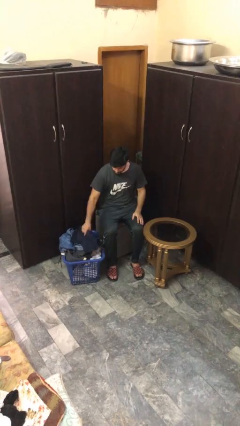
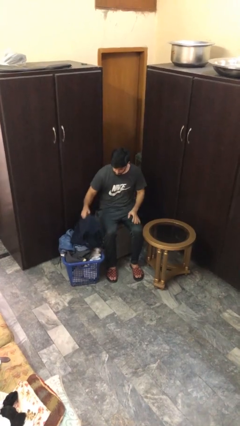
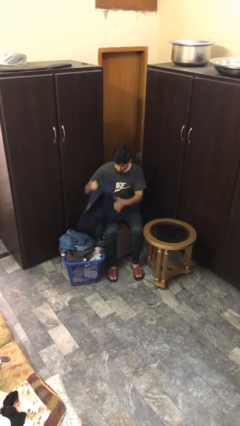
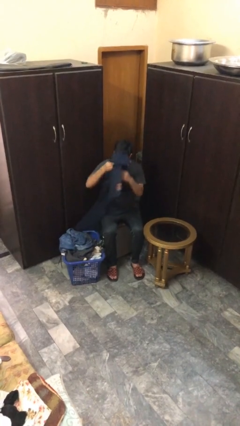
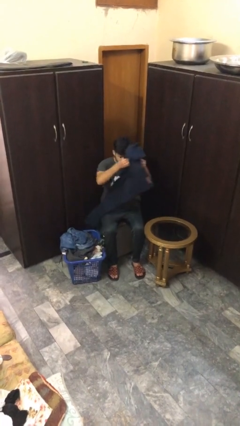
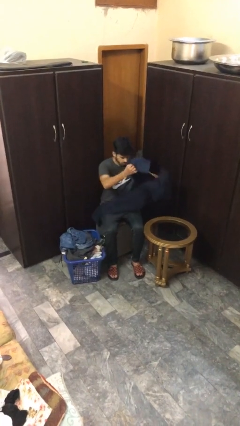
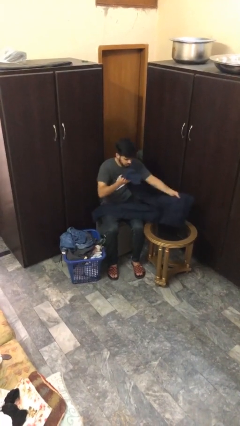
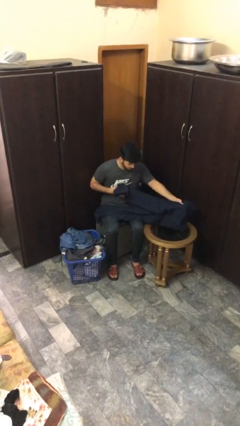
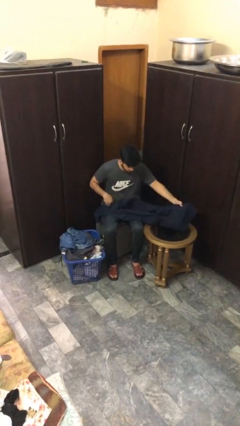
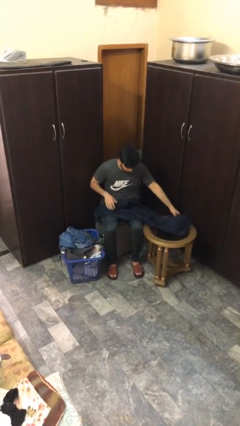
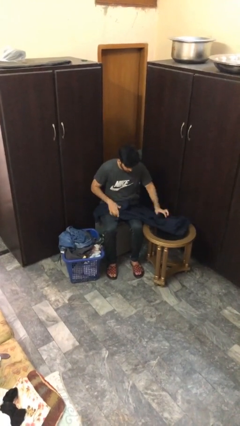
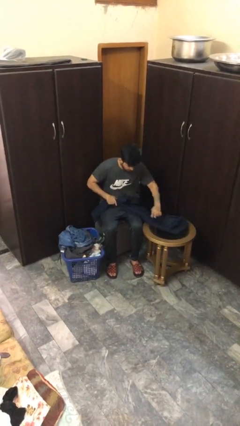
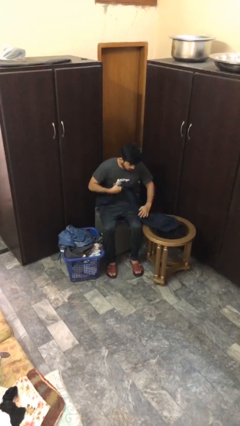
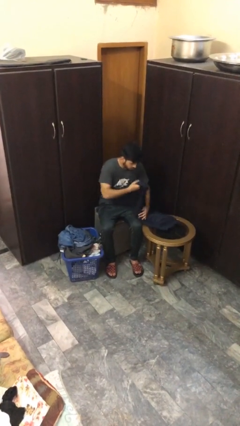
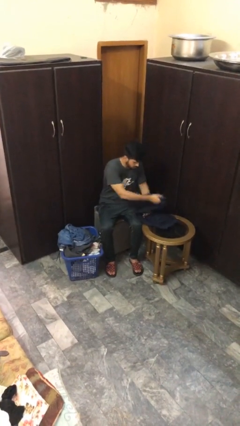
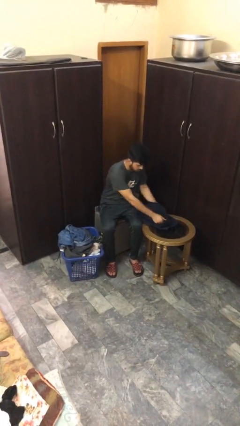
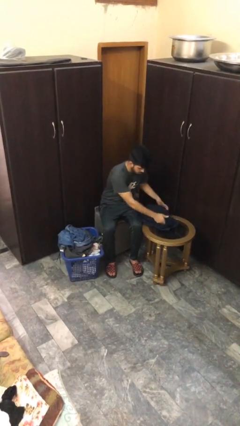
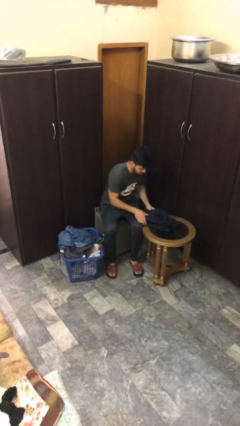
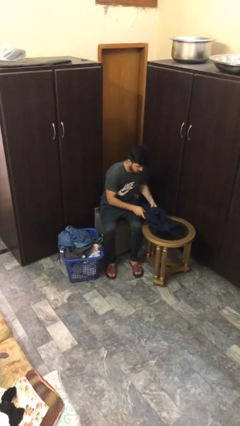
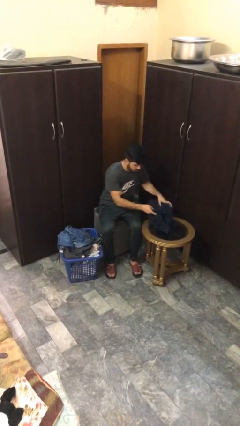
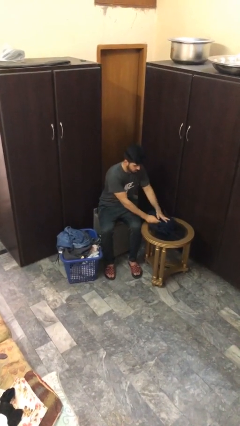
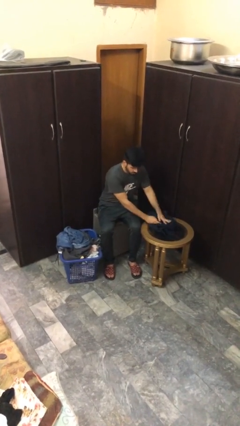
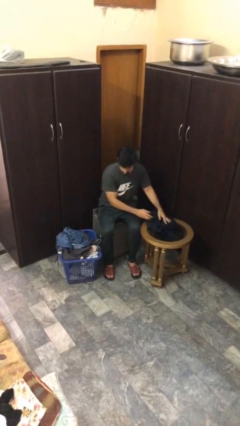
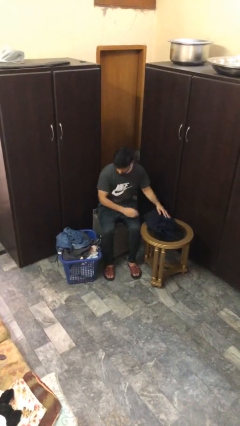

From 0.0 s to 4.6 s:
person folds pants

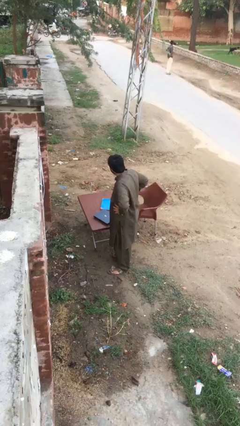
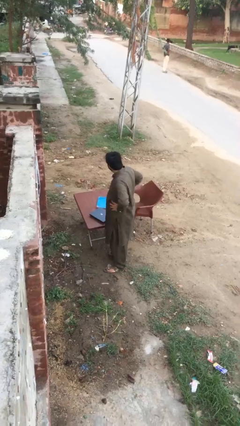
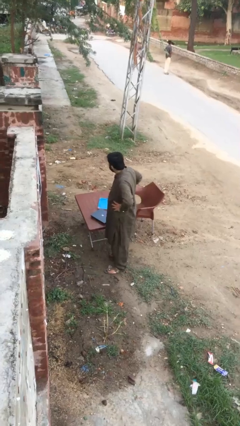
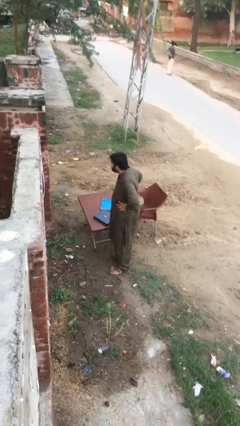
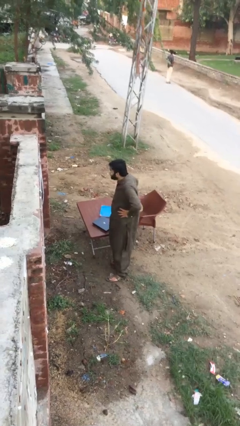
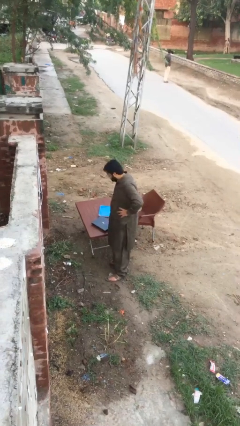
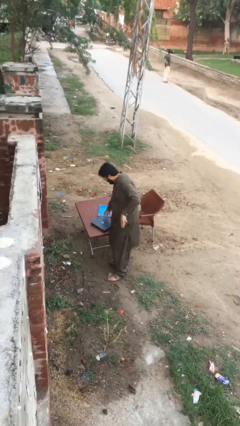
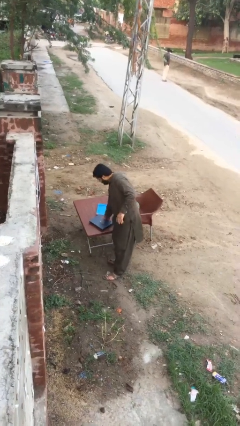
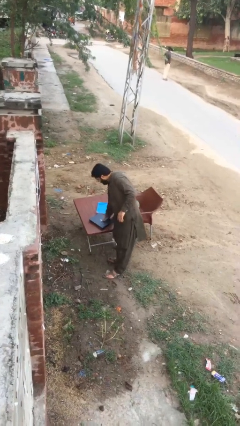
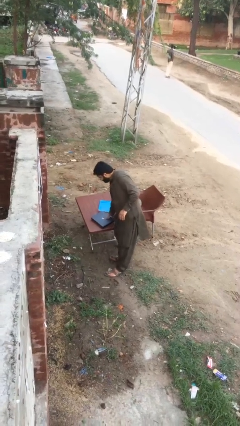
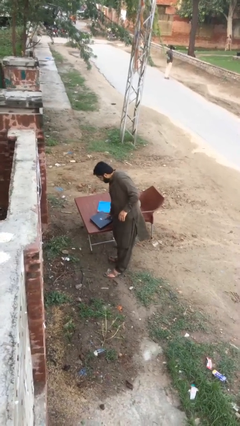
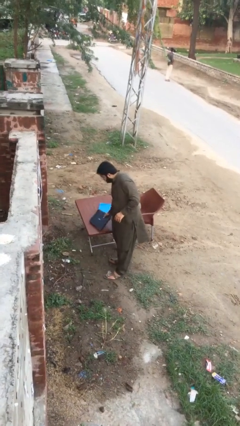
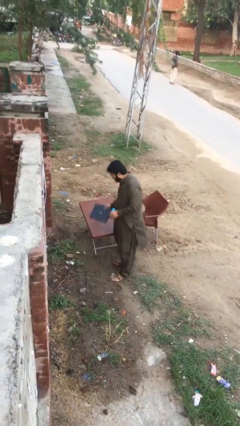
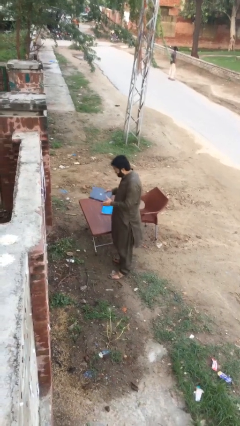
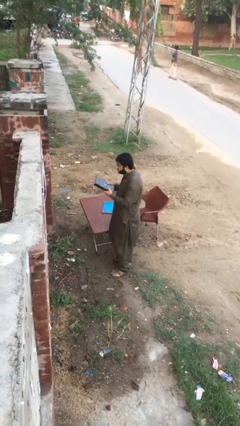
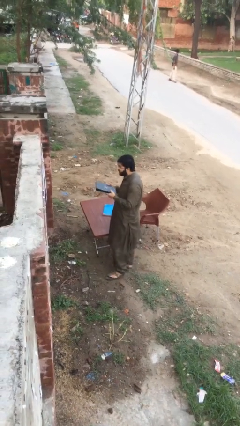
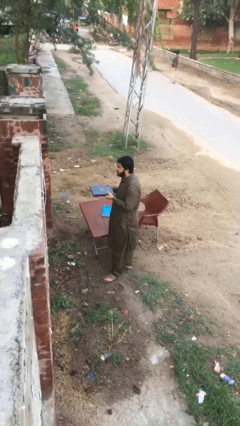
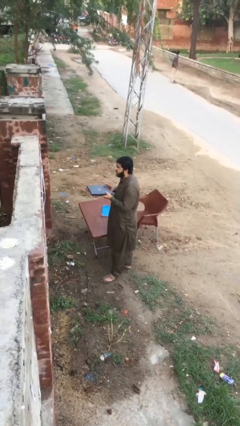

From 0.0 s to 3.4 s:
person picks up object from table

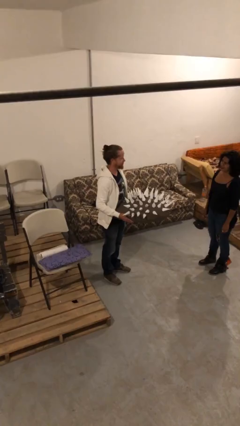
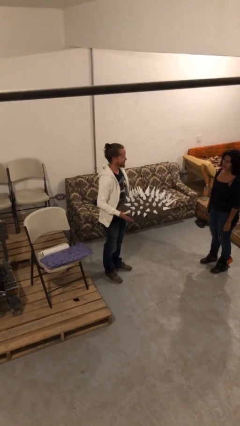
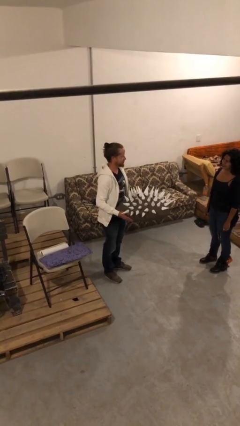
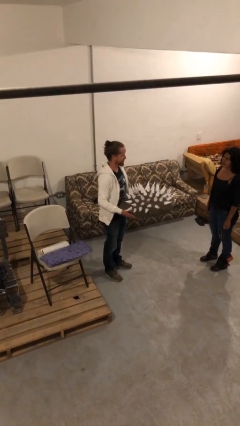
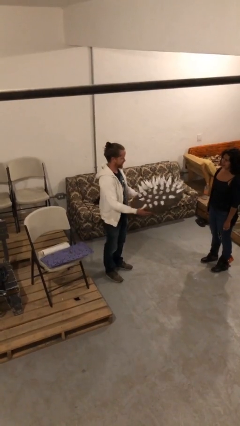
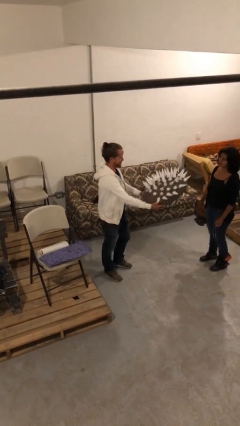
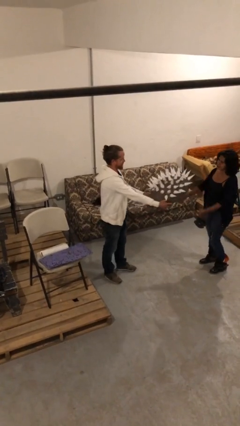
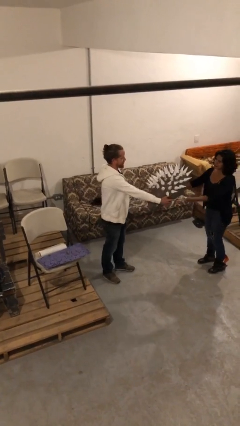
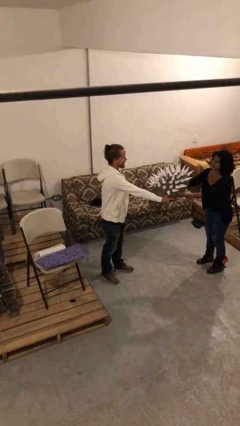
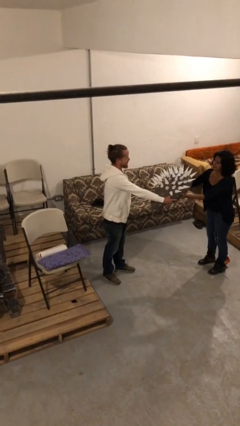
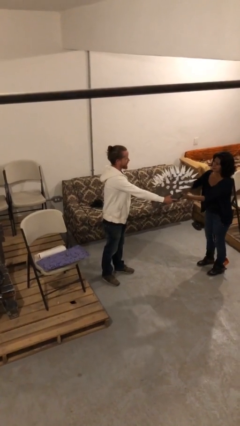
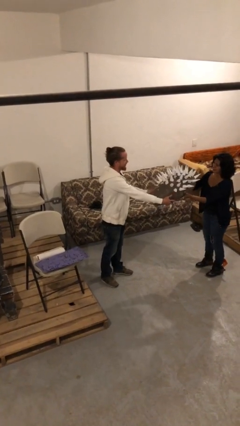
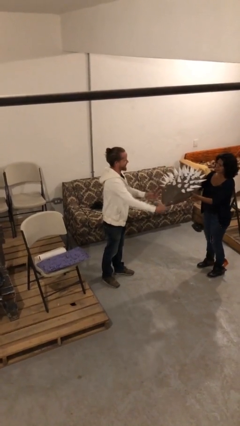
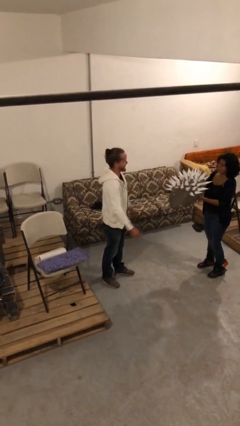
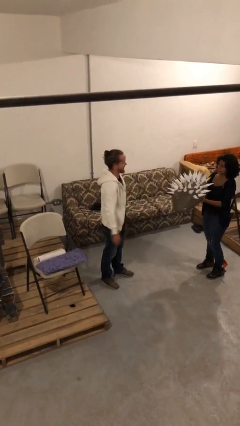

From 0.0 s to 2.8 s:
person transfers object to person

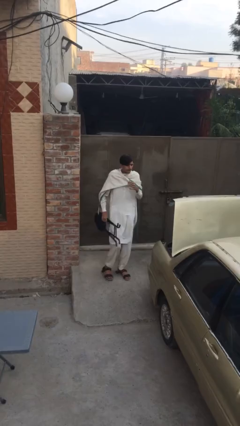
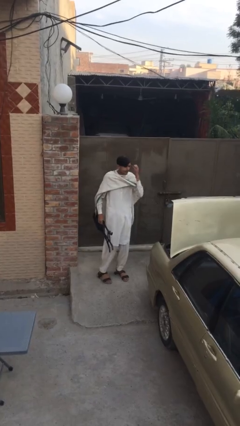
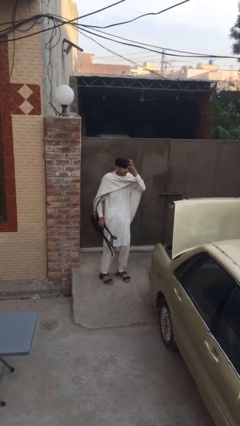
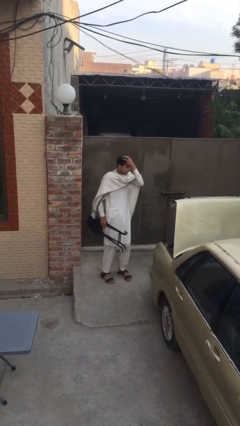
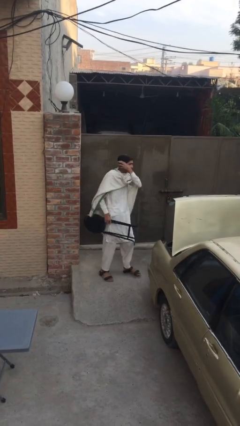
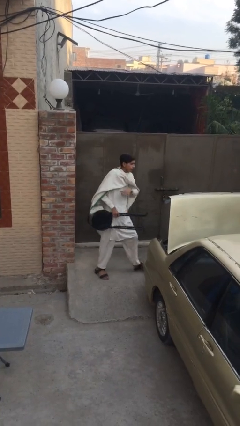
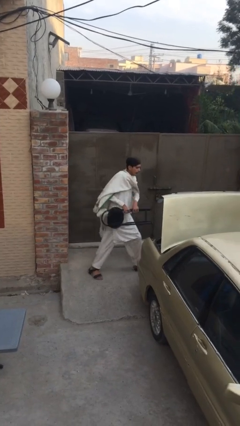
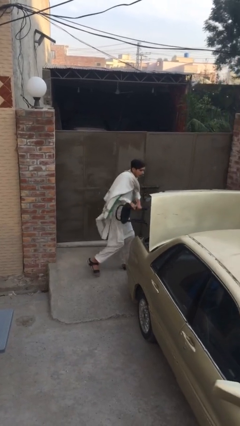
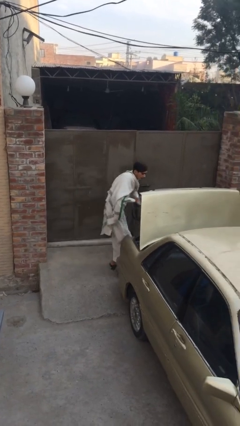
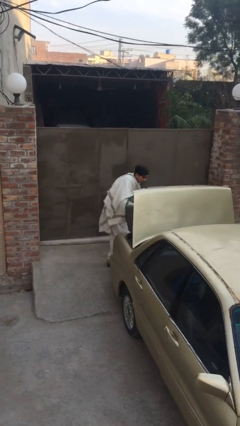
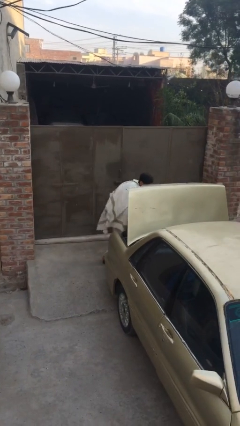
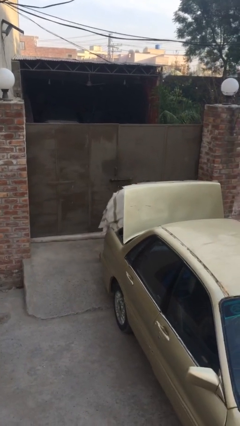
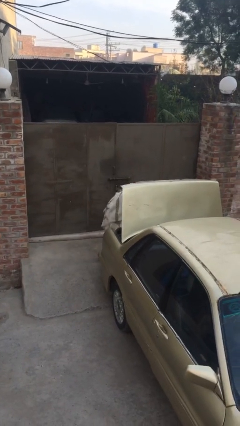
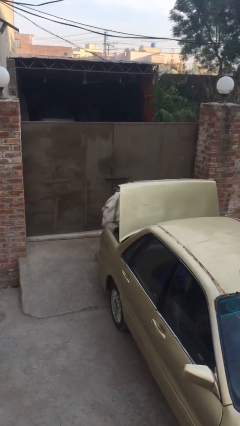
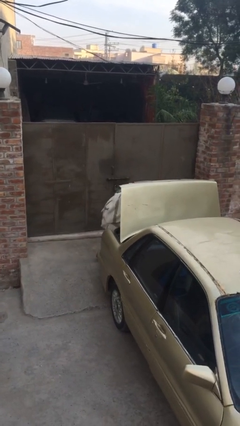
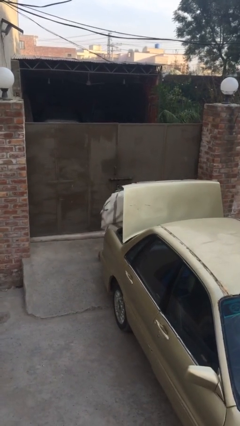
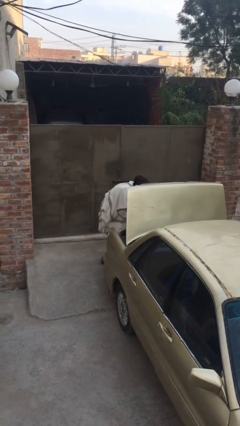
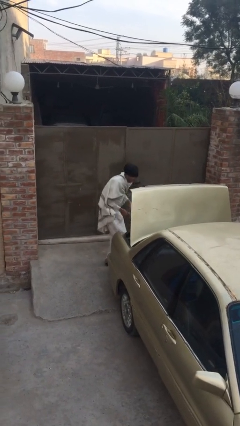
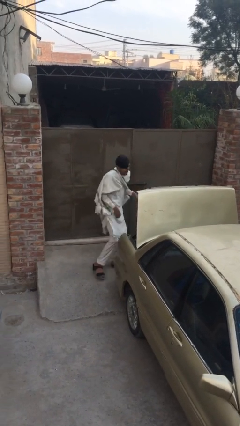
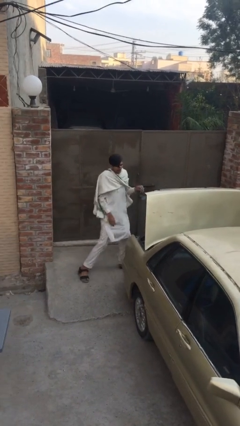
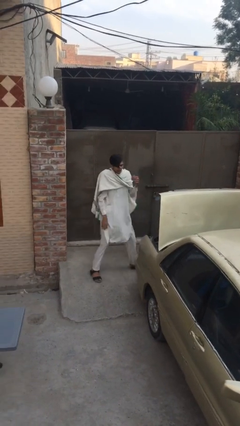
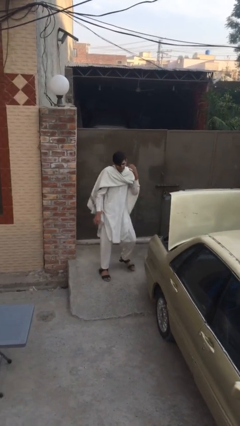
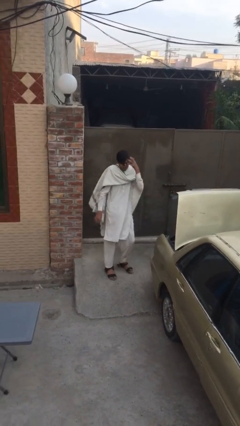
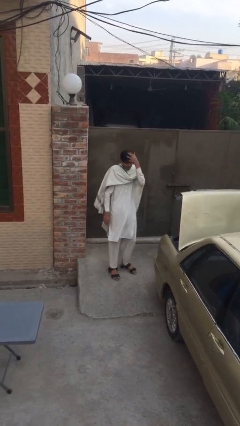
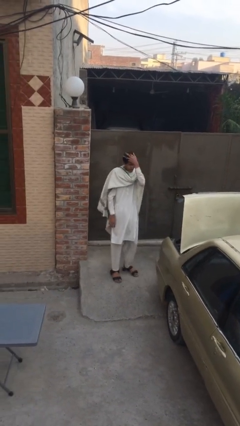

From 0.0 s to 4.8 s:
person loads car

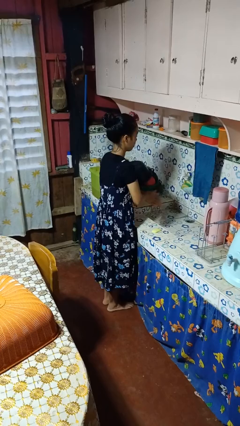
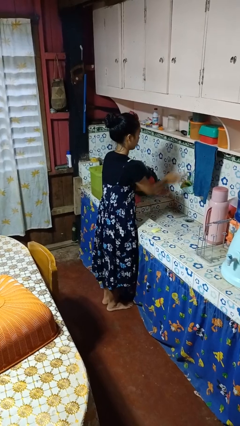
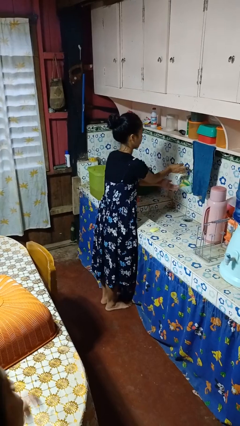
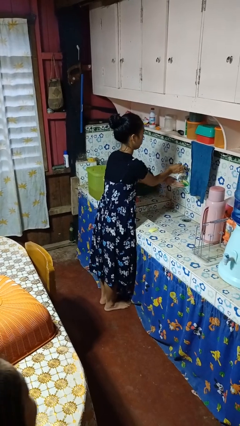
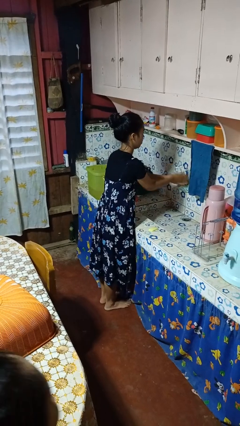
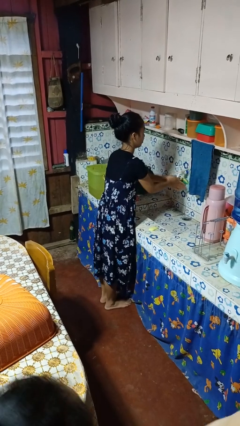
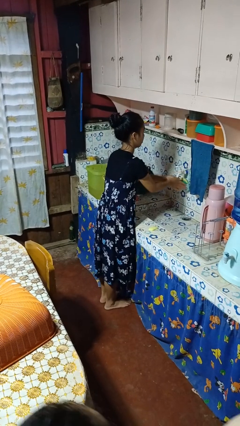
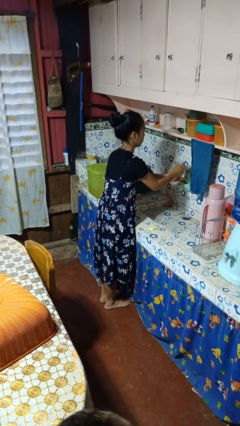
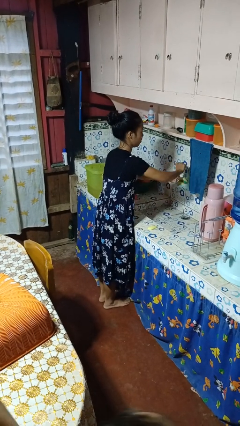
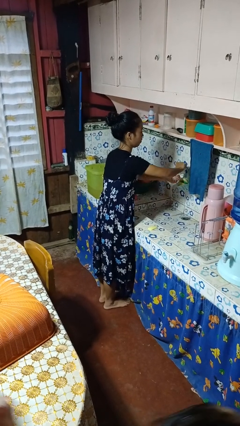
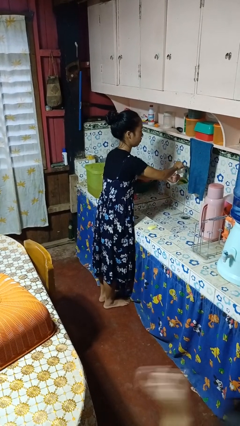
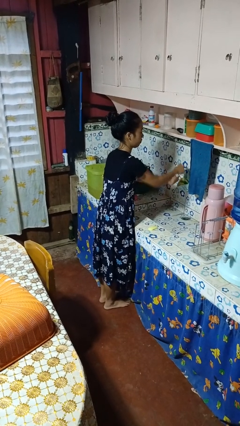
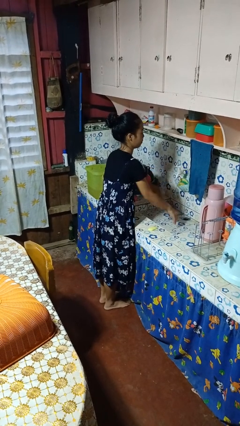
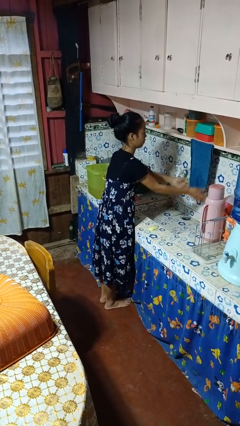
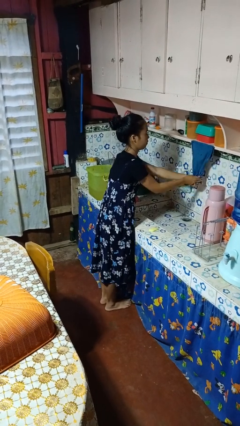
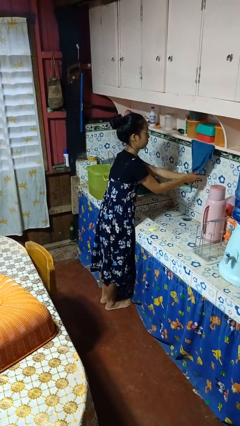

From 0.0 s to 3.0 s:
person washes hands
